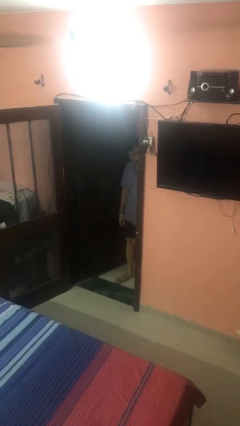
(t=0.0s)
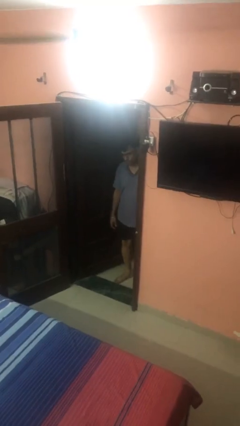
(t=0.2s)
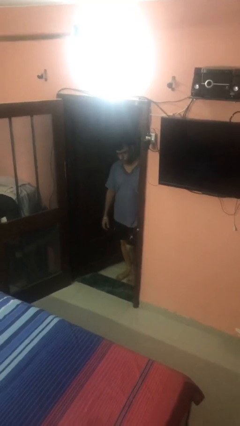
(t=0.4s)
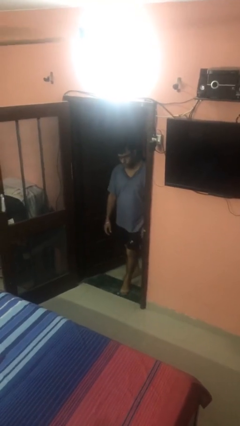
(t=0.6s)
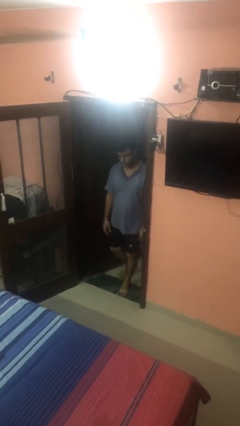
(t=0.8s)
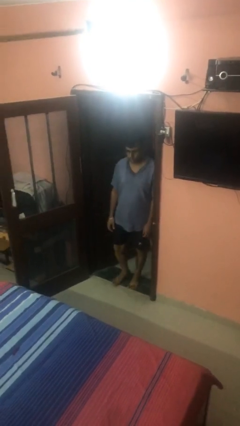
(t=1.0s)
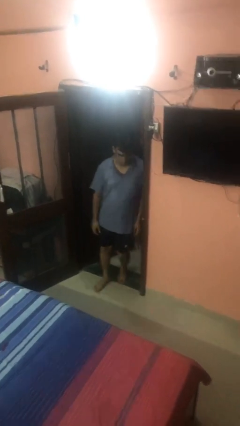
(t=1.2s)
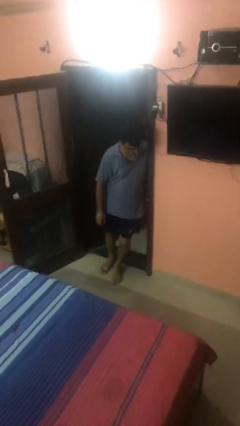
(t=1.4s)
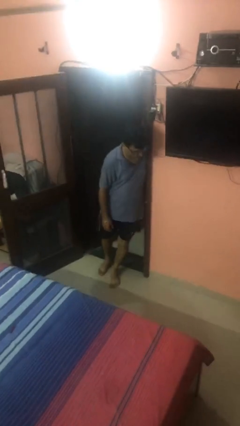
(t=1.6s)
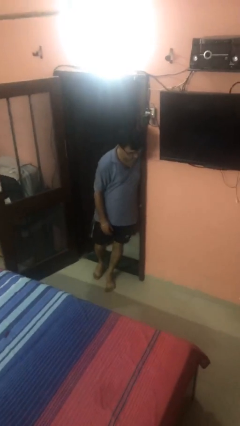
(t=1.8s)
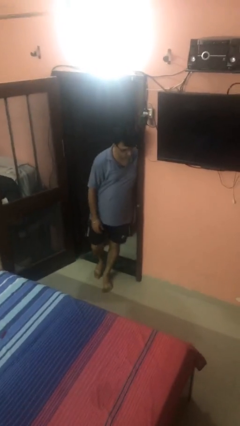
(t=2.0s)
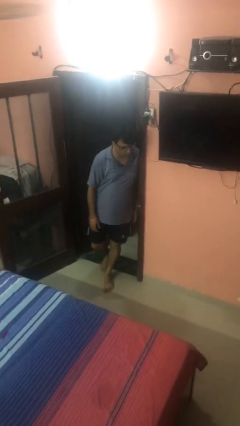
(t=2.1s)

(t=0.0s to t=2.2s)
person bumps into wall

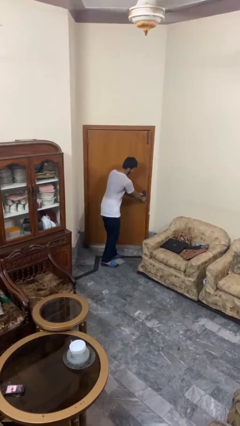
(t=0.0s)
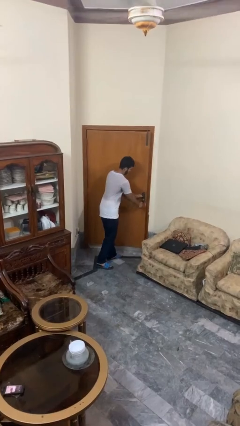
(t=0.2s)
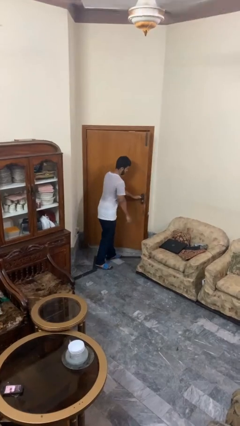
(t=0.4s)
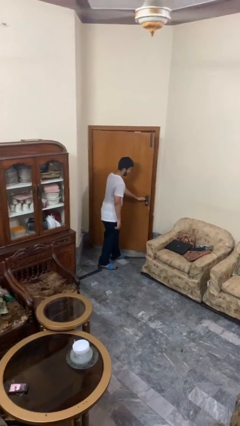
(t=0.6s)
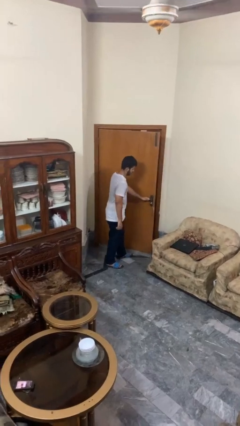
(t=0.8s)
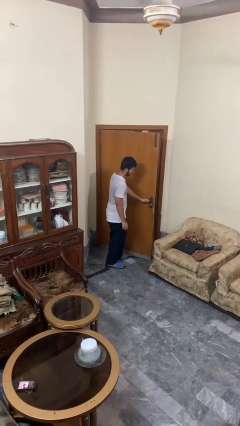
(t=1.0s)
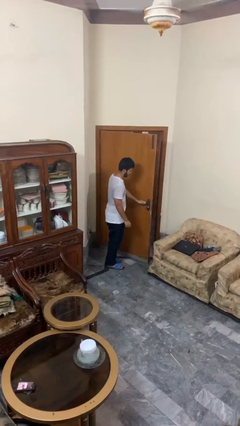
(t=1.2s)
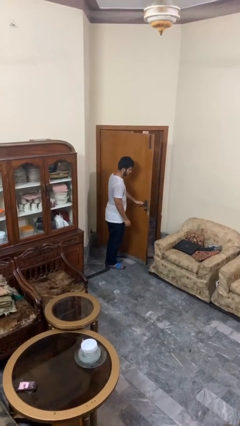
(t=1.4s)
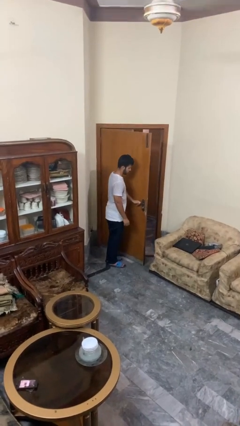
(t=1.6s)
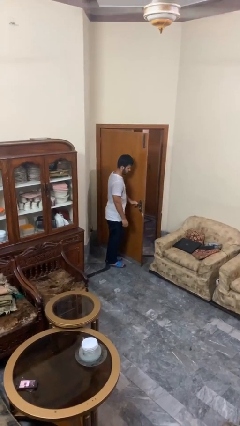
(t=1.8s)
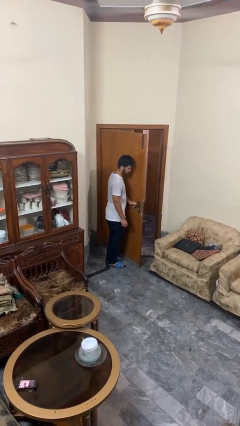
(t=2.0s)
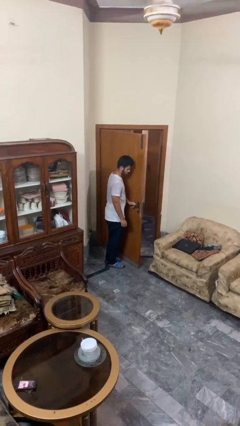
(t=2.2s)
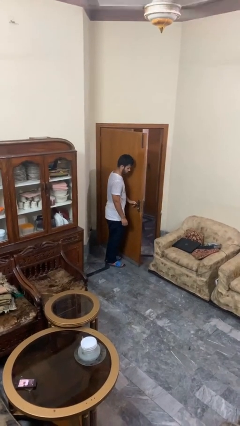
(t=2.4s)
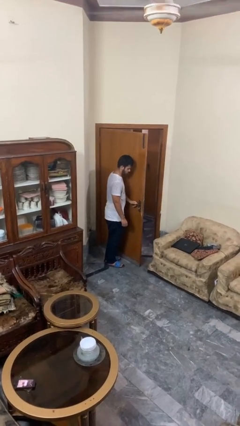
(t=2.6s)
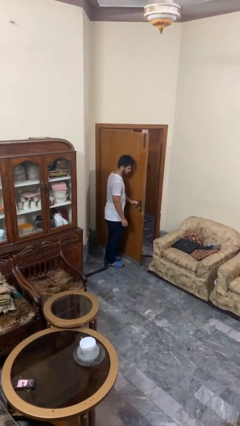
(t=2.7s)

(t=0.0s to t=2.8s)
person opens facility door

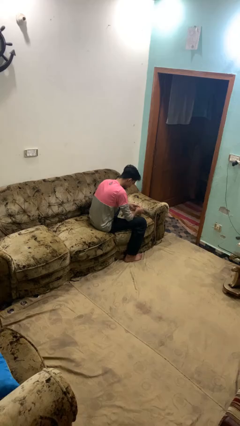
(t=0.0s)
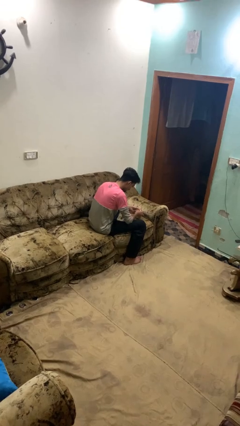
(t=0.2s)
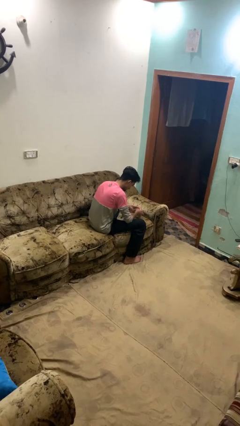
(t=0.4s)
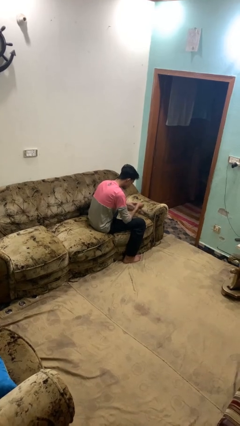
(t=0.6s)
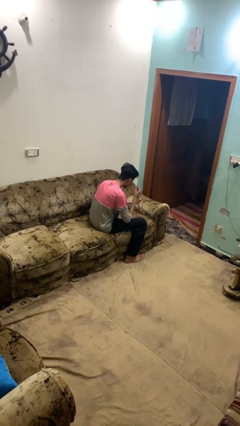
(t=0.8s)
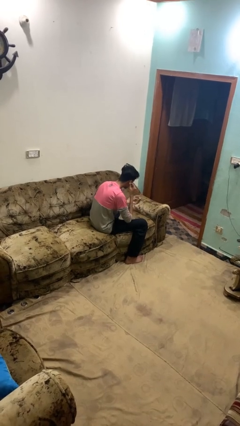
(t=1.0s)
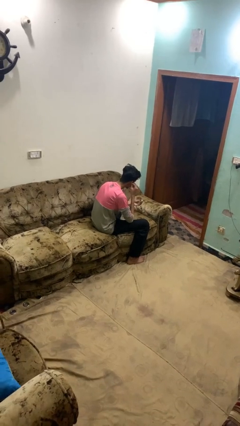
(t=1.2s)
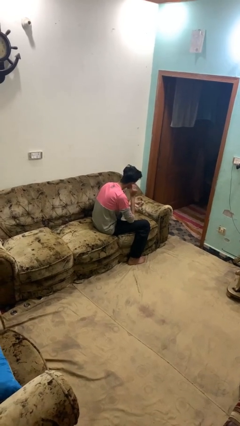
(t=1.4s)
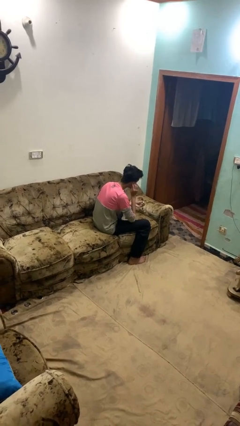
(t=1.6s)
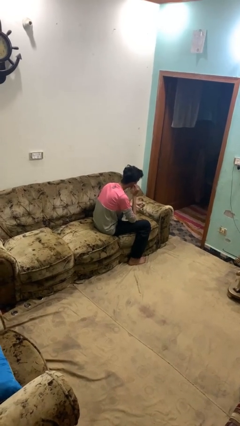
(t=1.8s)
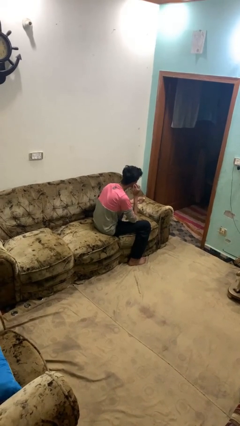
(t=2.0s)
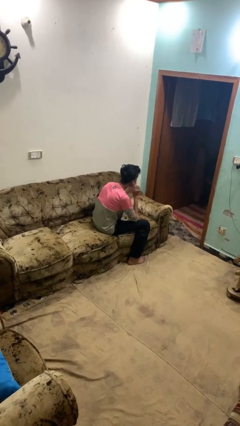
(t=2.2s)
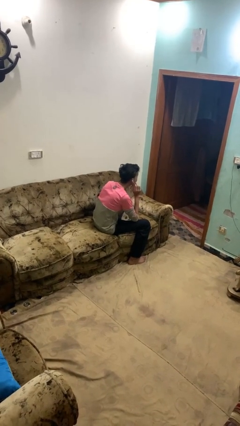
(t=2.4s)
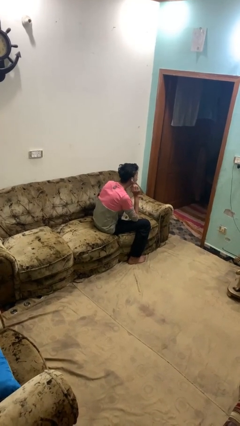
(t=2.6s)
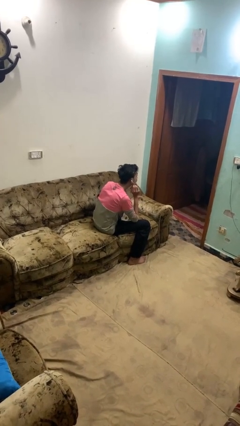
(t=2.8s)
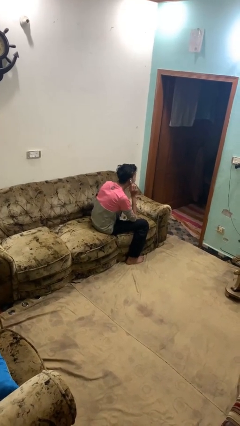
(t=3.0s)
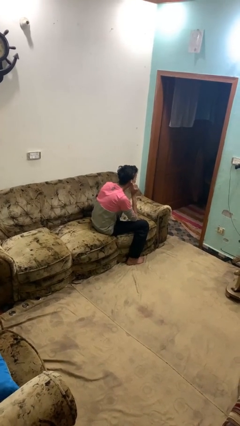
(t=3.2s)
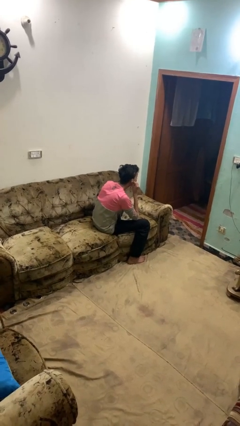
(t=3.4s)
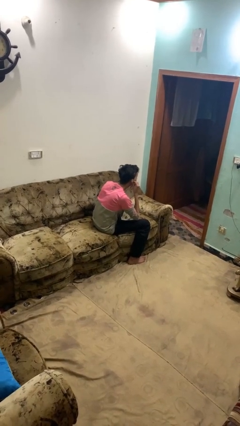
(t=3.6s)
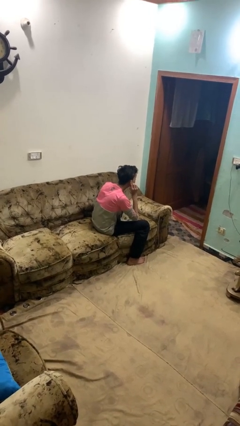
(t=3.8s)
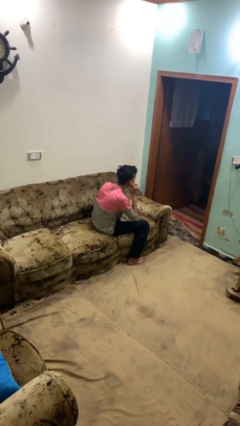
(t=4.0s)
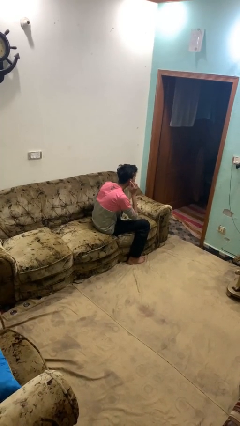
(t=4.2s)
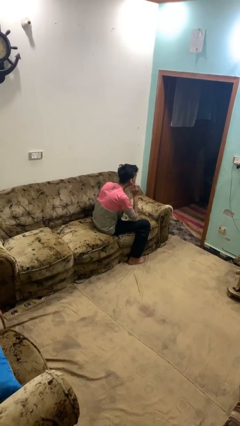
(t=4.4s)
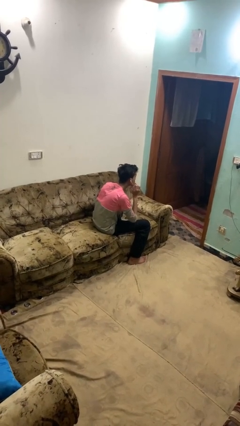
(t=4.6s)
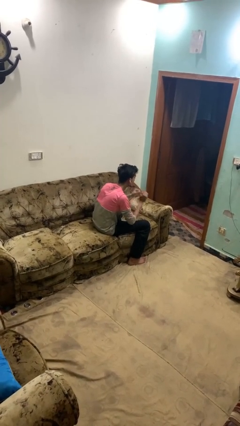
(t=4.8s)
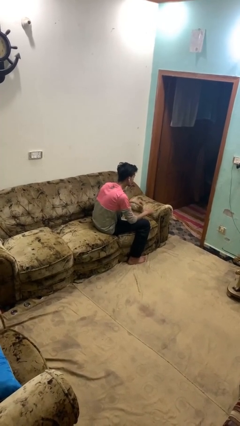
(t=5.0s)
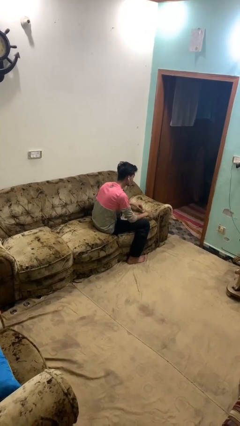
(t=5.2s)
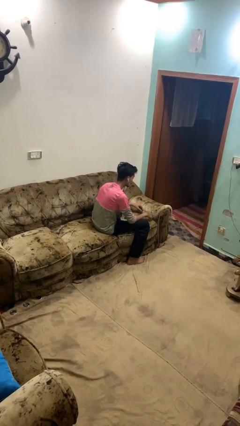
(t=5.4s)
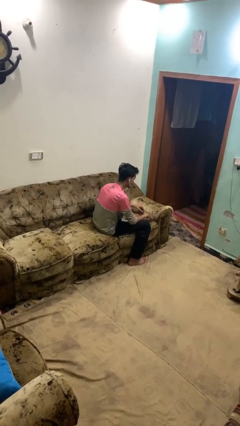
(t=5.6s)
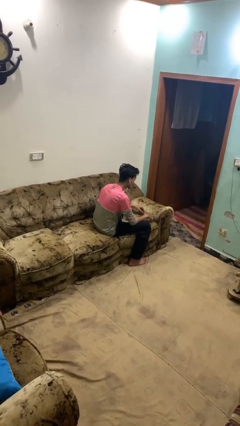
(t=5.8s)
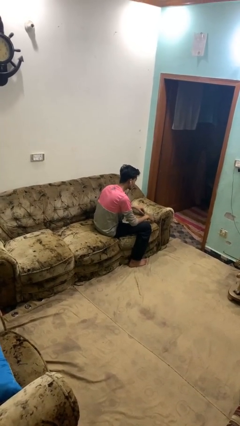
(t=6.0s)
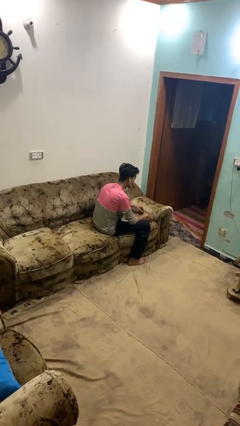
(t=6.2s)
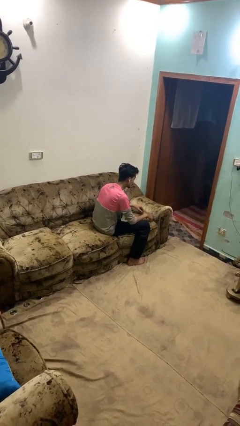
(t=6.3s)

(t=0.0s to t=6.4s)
person puts on headphones

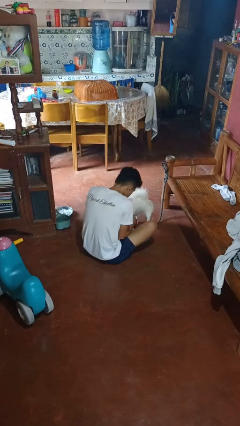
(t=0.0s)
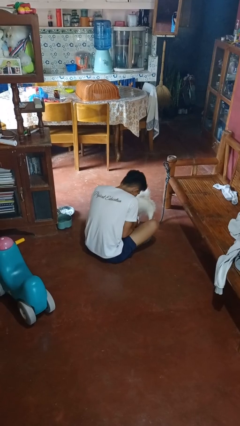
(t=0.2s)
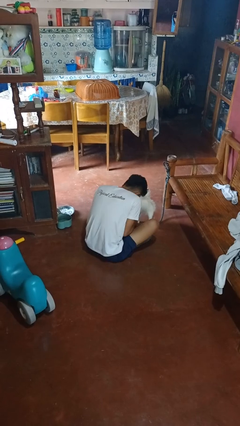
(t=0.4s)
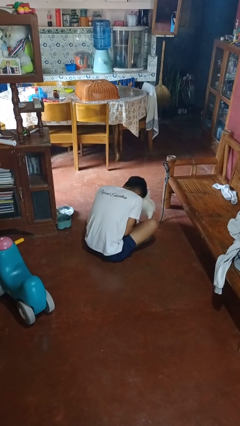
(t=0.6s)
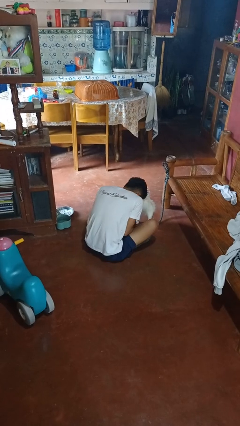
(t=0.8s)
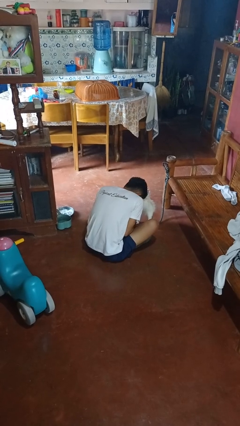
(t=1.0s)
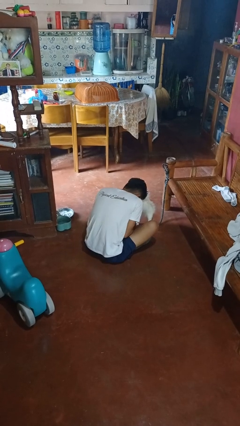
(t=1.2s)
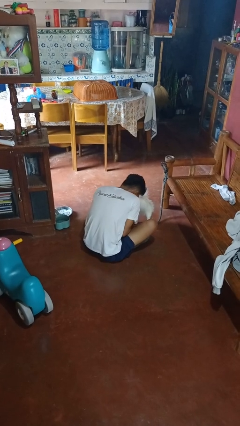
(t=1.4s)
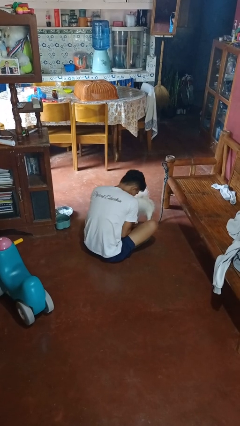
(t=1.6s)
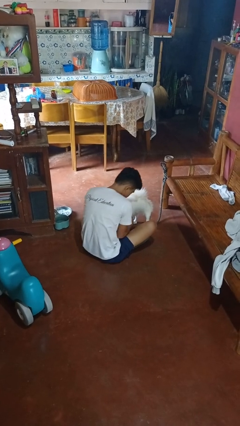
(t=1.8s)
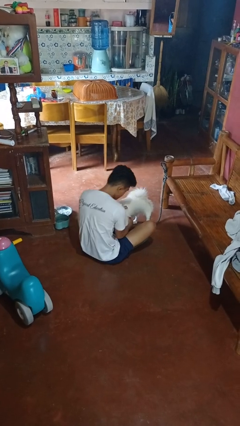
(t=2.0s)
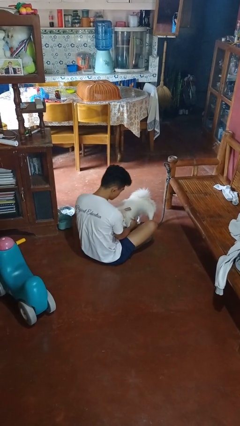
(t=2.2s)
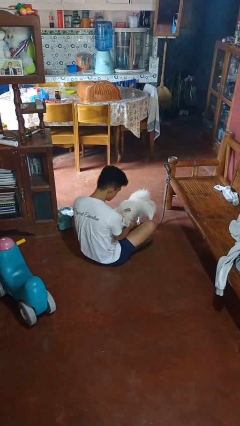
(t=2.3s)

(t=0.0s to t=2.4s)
person hugs dog

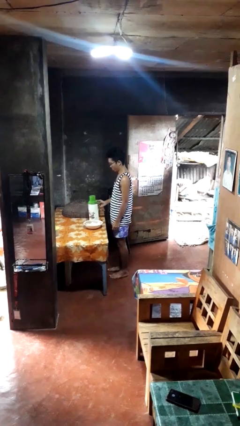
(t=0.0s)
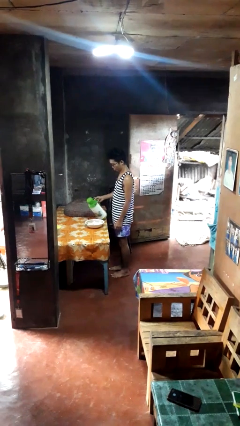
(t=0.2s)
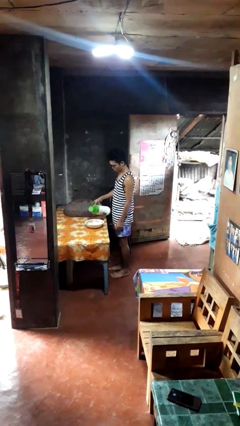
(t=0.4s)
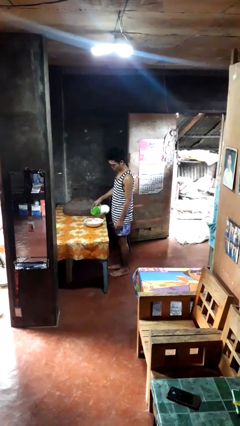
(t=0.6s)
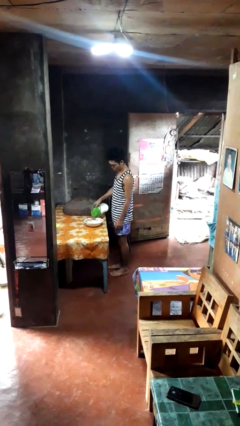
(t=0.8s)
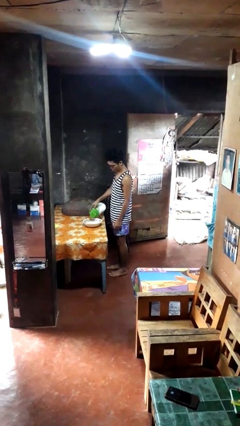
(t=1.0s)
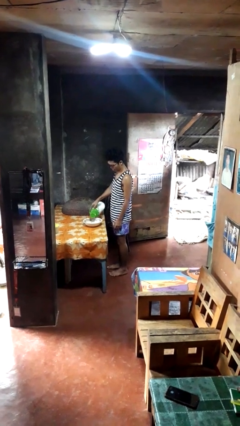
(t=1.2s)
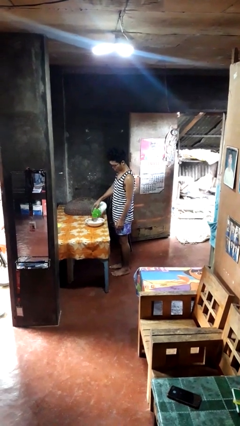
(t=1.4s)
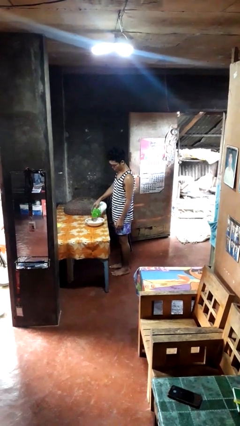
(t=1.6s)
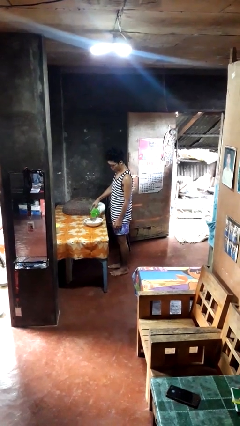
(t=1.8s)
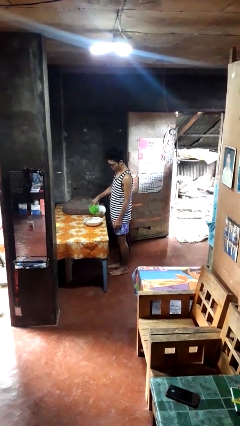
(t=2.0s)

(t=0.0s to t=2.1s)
person pours into bowl

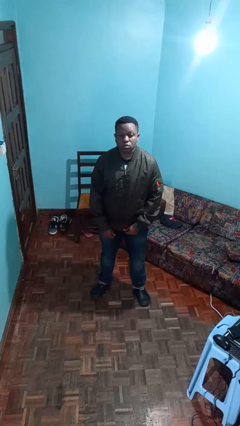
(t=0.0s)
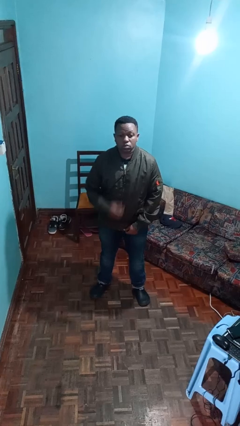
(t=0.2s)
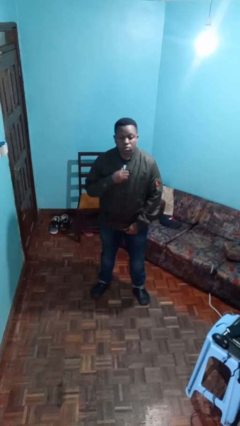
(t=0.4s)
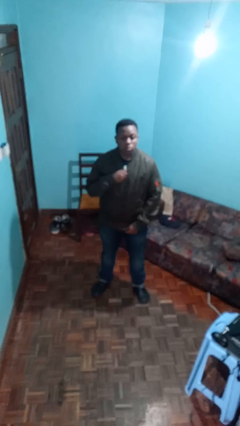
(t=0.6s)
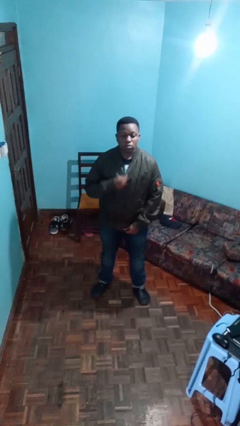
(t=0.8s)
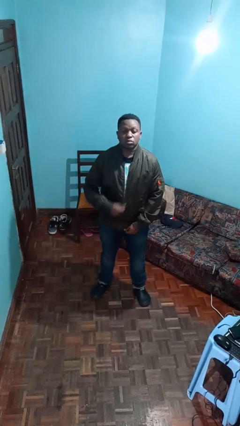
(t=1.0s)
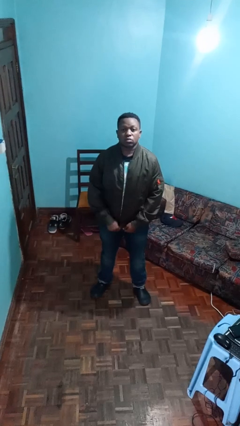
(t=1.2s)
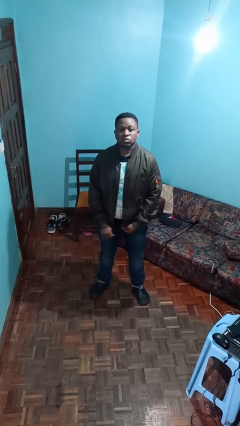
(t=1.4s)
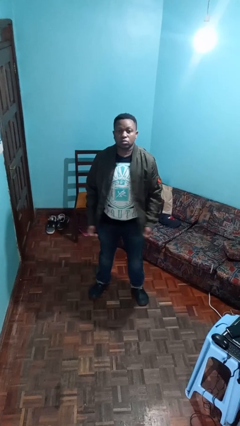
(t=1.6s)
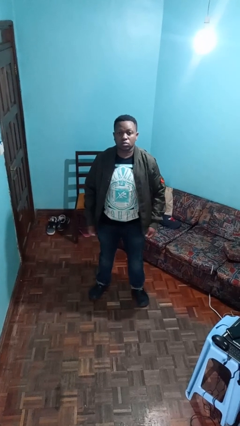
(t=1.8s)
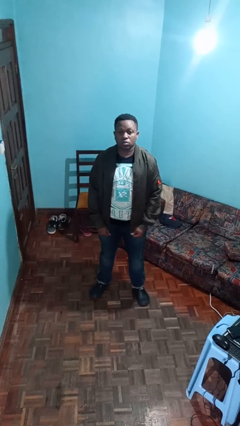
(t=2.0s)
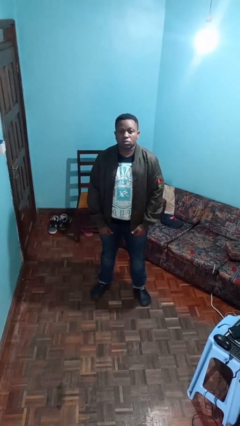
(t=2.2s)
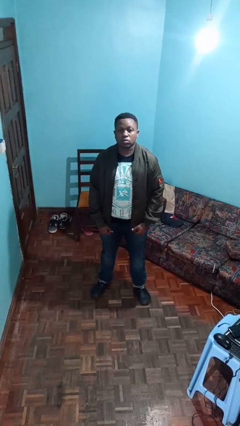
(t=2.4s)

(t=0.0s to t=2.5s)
person unzips jacket
